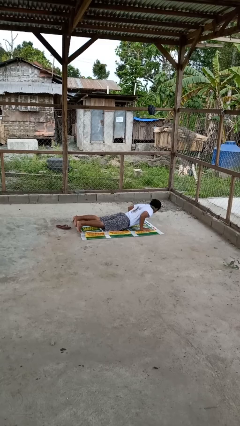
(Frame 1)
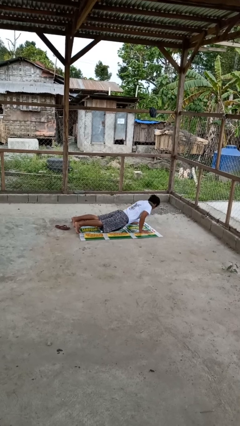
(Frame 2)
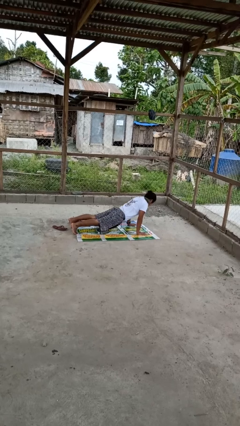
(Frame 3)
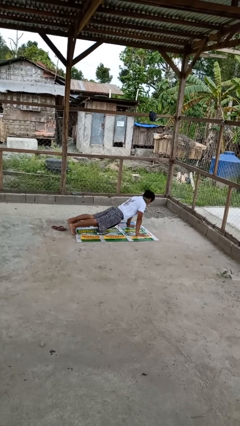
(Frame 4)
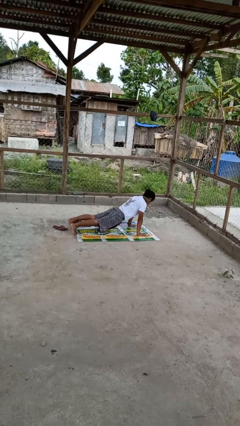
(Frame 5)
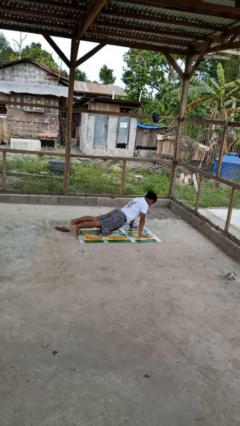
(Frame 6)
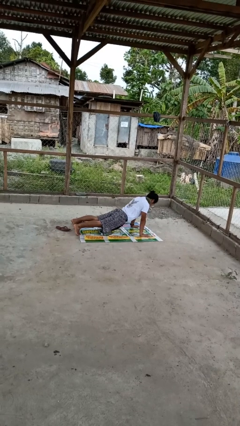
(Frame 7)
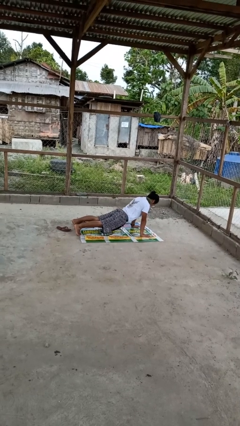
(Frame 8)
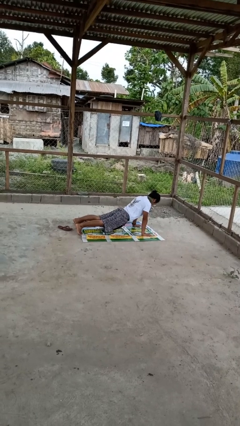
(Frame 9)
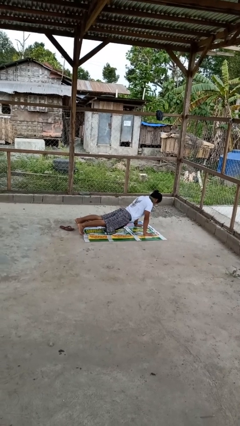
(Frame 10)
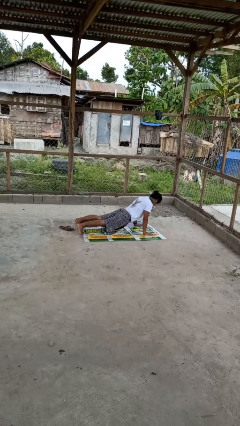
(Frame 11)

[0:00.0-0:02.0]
person exercises with pushup

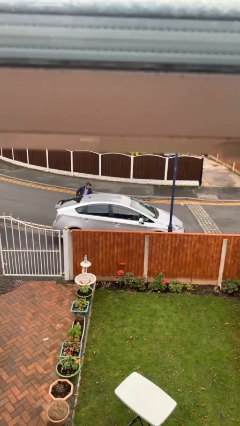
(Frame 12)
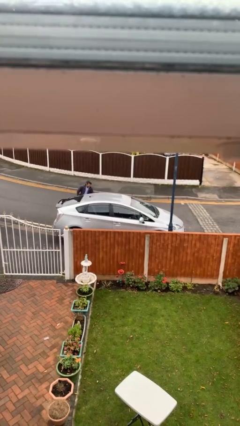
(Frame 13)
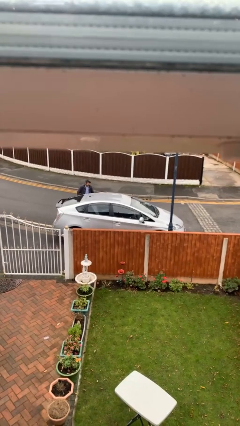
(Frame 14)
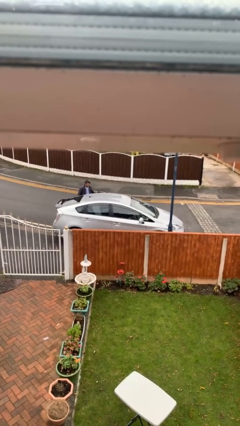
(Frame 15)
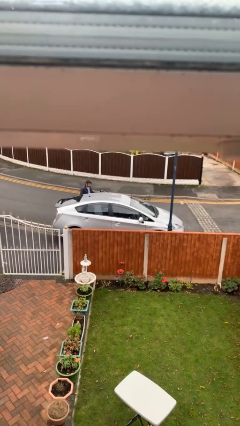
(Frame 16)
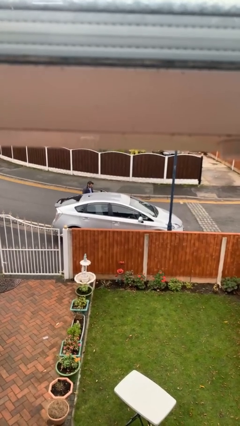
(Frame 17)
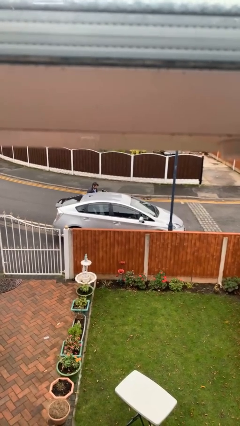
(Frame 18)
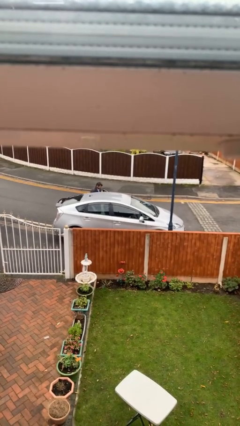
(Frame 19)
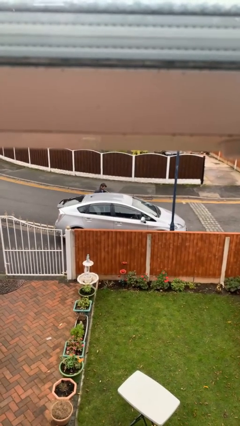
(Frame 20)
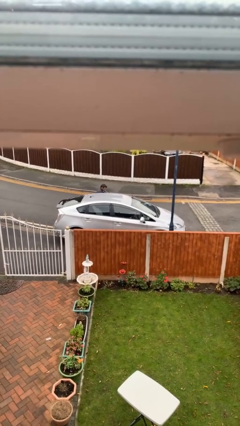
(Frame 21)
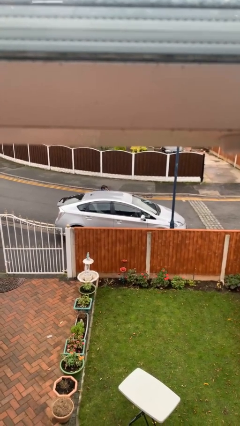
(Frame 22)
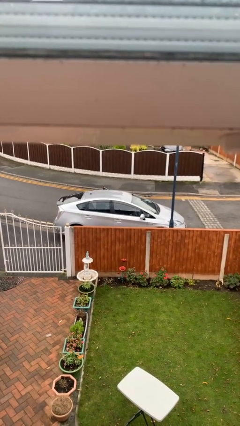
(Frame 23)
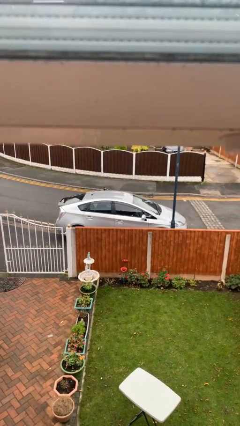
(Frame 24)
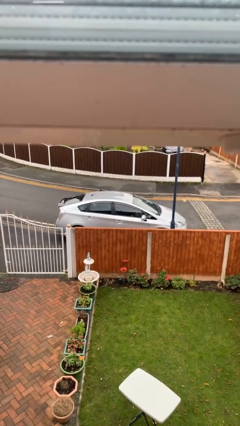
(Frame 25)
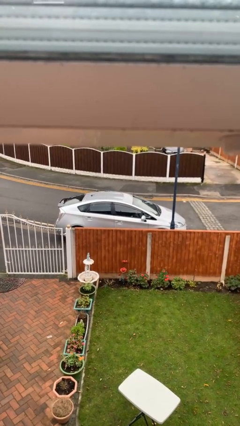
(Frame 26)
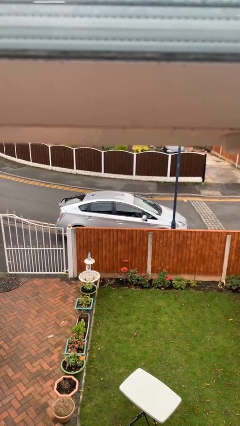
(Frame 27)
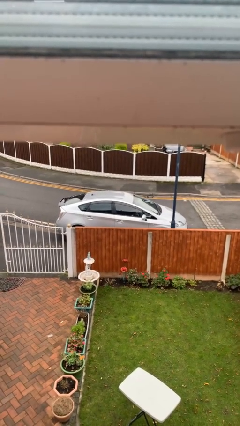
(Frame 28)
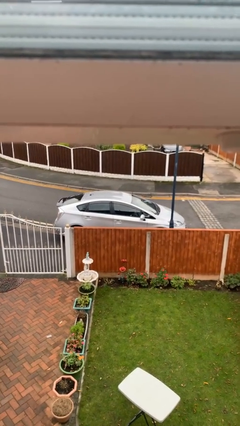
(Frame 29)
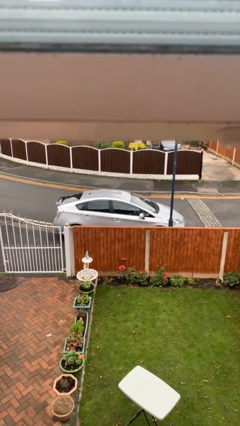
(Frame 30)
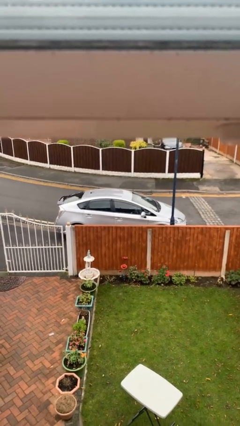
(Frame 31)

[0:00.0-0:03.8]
car picks up person

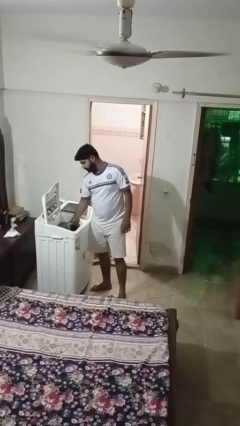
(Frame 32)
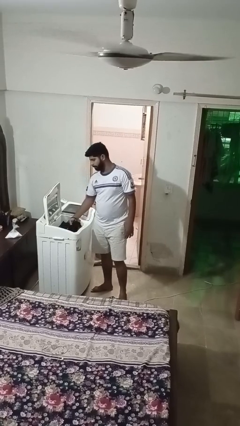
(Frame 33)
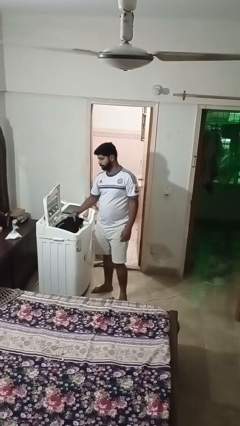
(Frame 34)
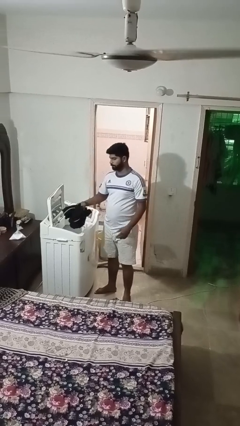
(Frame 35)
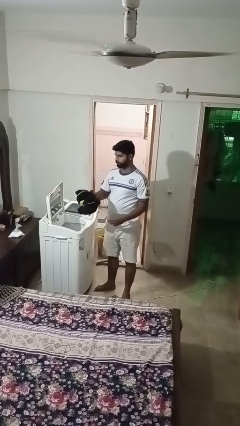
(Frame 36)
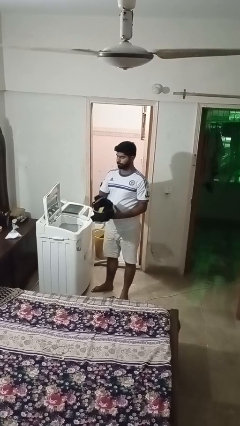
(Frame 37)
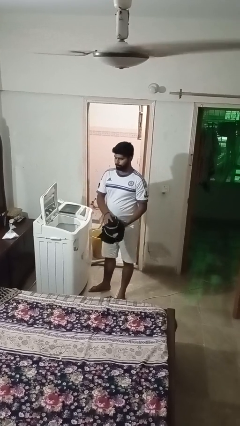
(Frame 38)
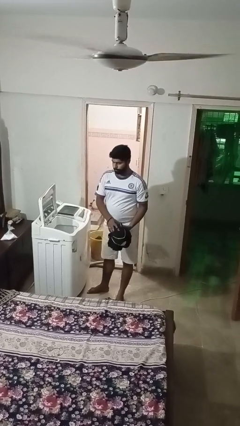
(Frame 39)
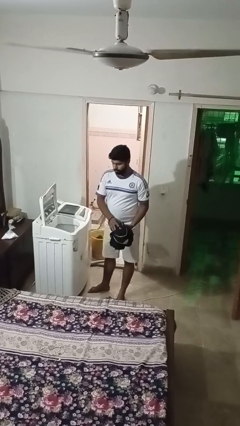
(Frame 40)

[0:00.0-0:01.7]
person unloads clotheswasher

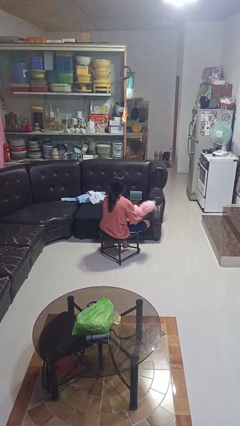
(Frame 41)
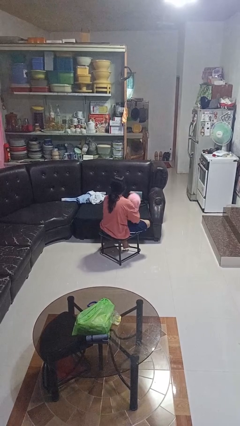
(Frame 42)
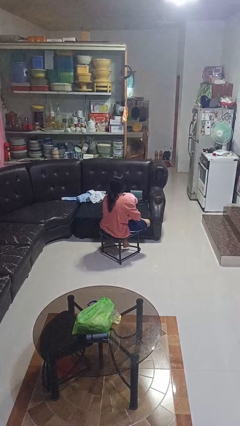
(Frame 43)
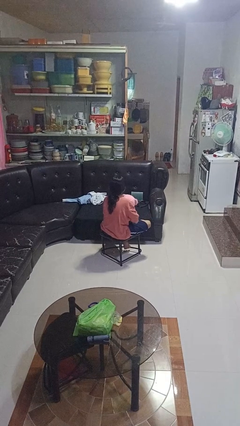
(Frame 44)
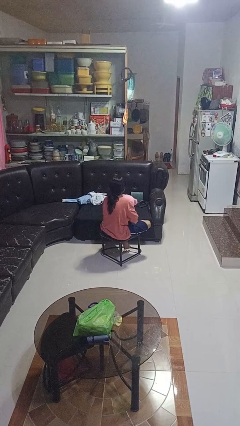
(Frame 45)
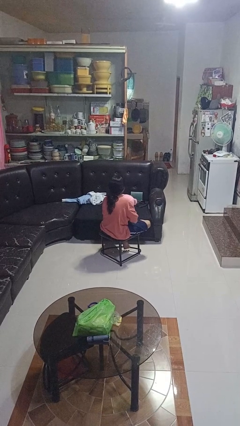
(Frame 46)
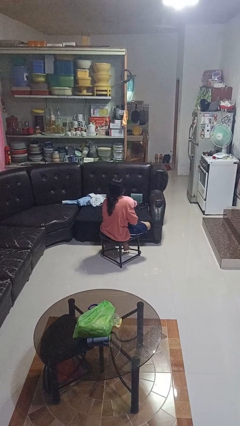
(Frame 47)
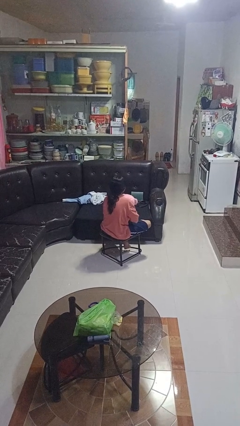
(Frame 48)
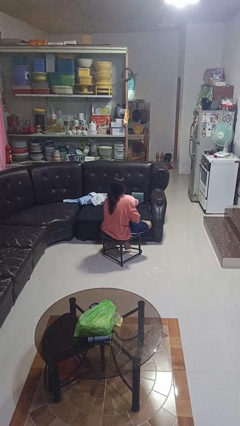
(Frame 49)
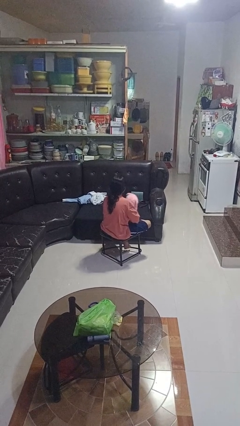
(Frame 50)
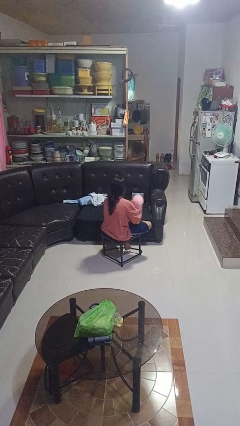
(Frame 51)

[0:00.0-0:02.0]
person hugs stuffed animal

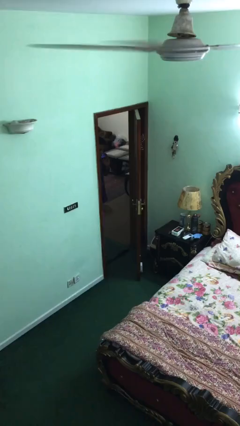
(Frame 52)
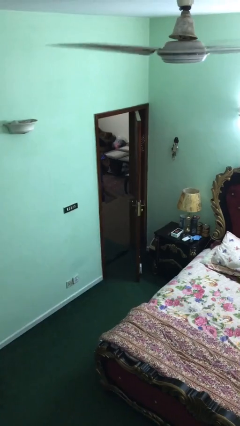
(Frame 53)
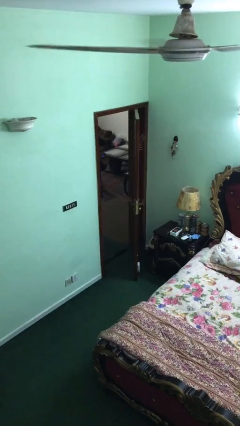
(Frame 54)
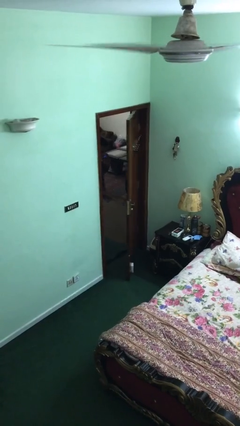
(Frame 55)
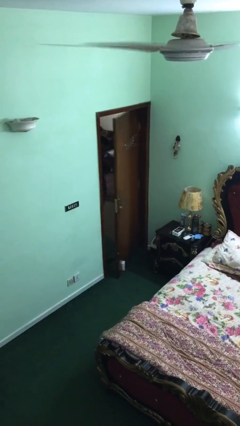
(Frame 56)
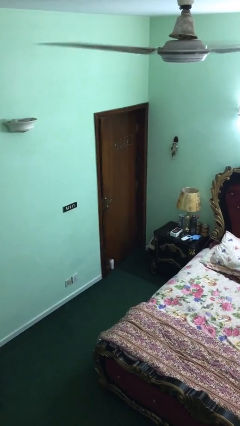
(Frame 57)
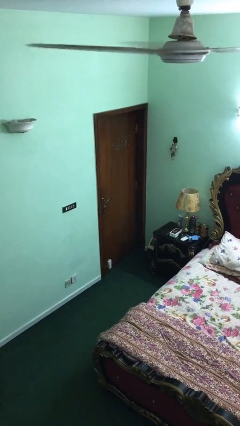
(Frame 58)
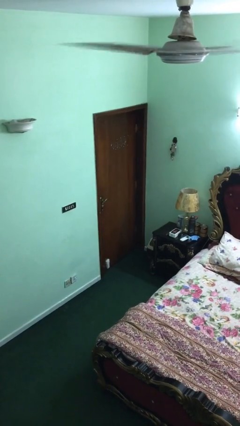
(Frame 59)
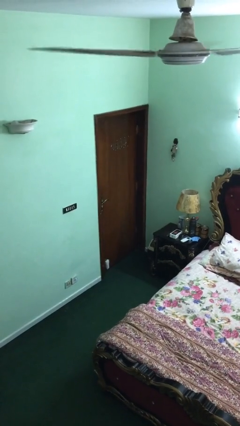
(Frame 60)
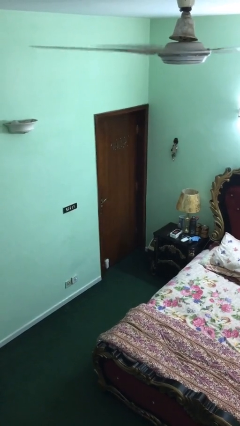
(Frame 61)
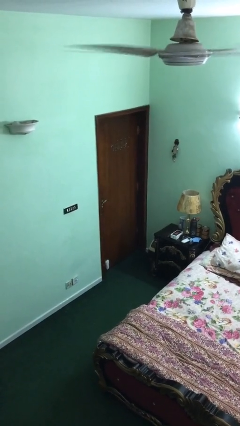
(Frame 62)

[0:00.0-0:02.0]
person closes facility door

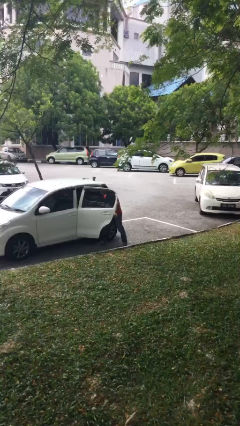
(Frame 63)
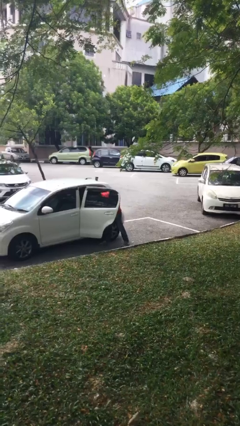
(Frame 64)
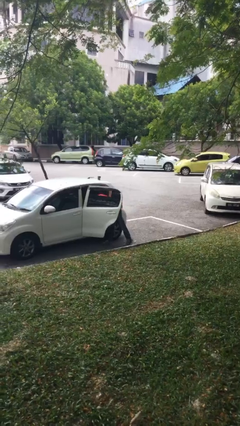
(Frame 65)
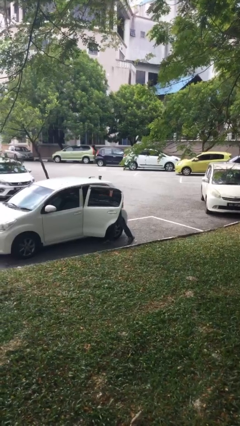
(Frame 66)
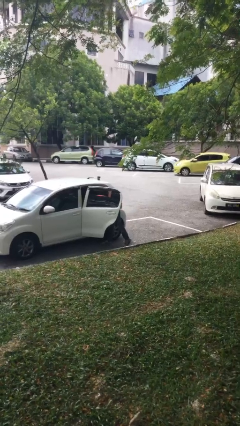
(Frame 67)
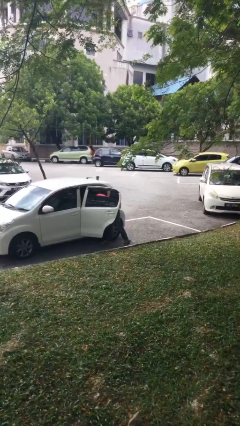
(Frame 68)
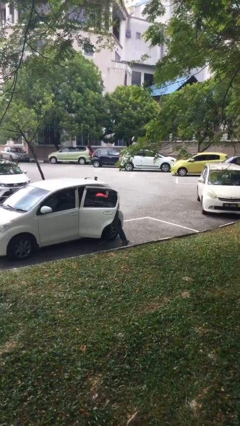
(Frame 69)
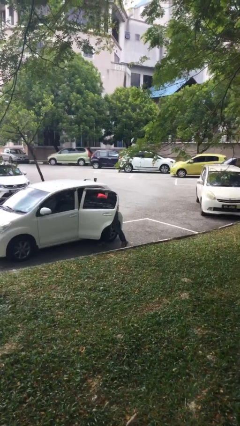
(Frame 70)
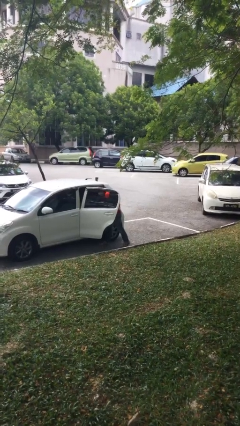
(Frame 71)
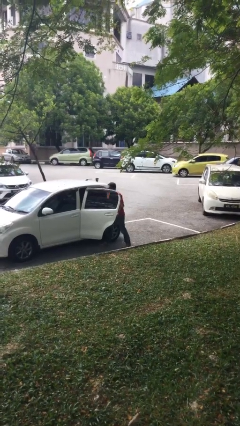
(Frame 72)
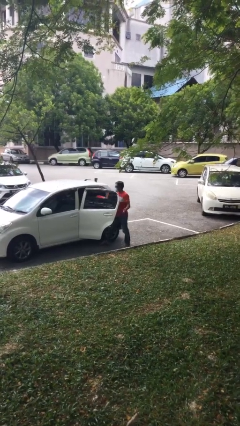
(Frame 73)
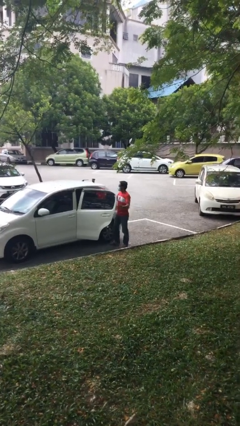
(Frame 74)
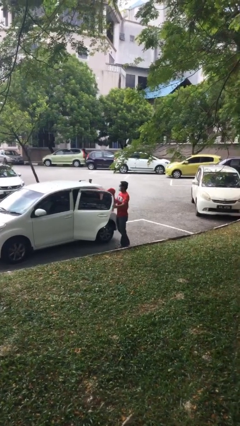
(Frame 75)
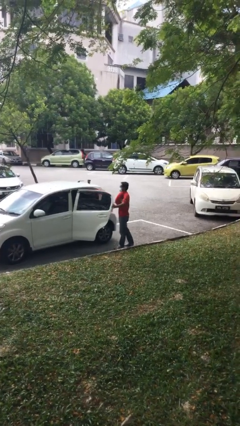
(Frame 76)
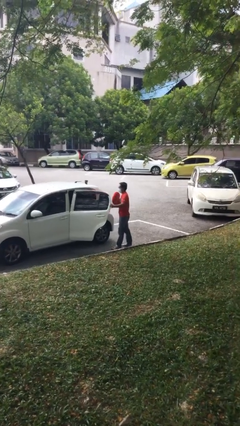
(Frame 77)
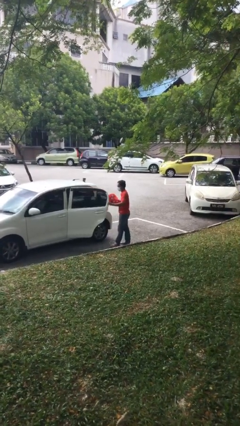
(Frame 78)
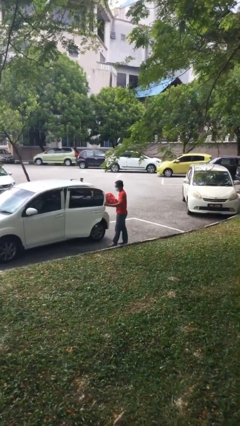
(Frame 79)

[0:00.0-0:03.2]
person unloads car

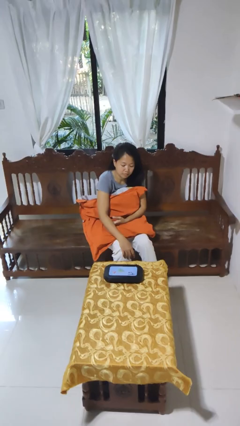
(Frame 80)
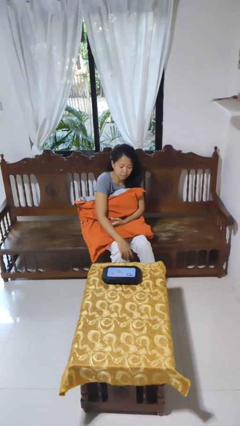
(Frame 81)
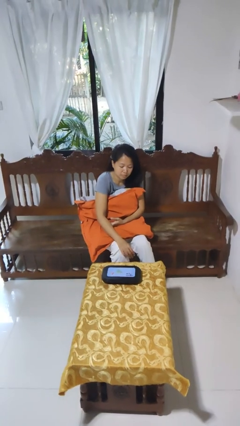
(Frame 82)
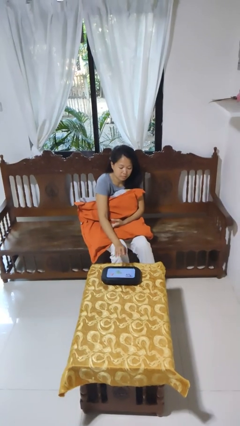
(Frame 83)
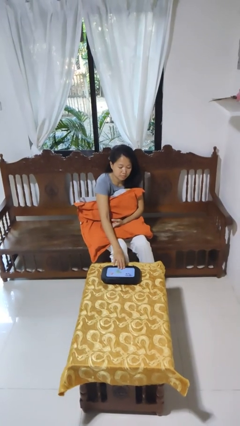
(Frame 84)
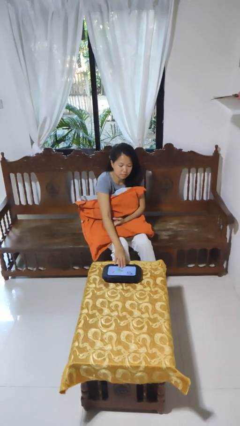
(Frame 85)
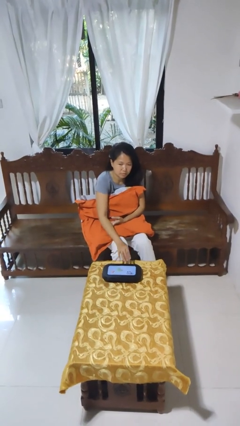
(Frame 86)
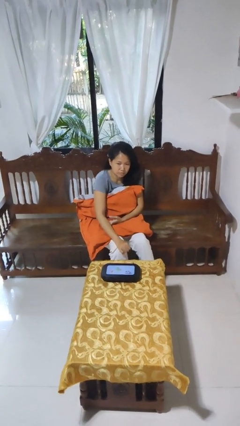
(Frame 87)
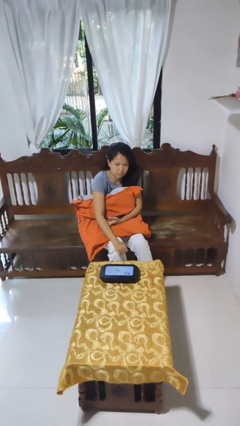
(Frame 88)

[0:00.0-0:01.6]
person taps object with finger

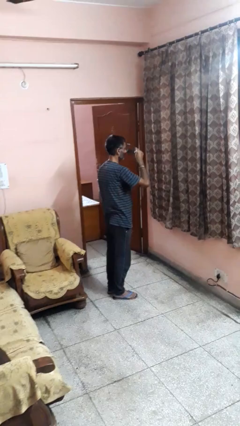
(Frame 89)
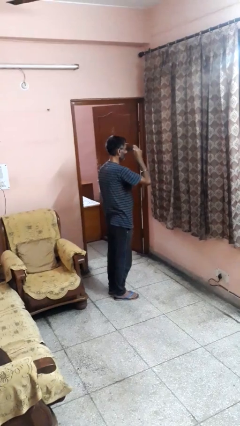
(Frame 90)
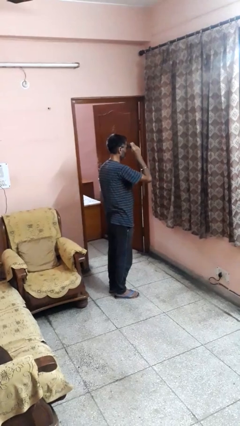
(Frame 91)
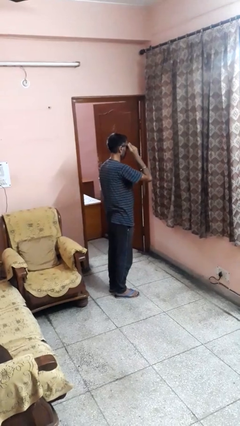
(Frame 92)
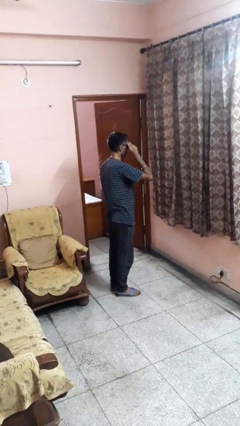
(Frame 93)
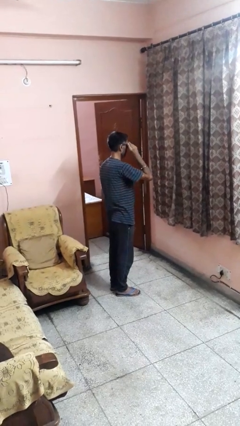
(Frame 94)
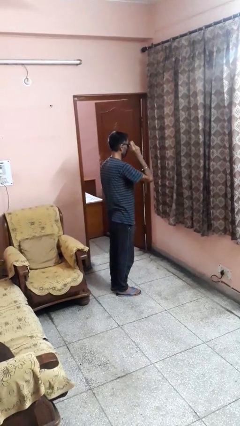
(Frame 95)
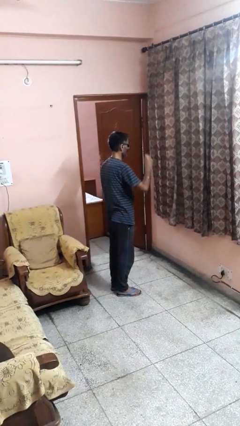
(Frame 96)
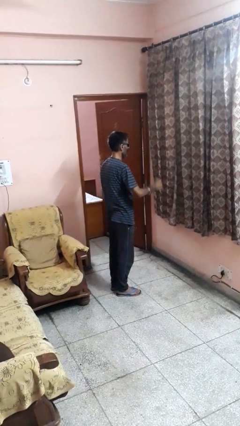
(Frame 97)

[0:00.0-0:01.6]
person puts on sunglasses
